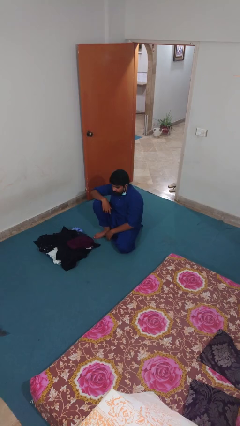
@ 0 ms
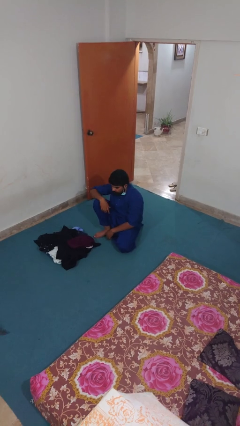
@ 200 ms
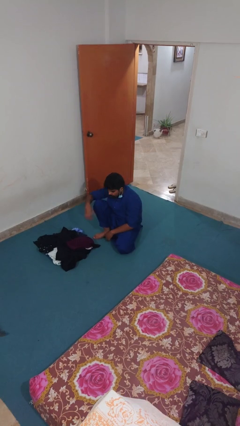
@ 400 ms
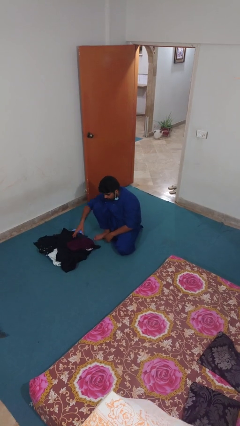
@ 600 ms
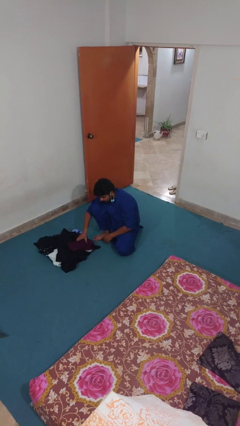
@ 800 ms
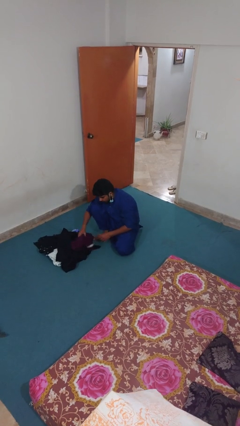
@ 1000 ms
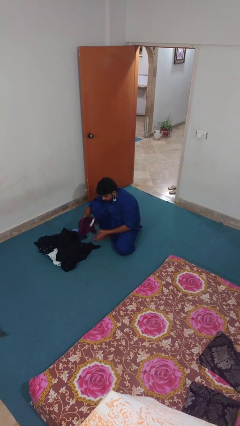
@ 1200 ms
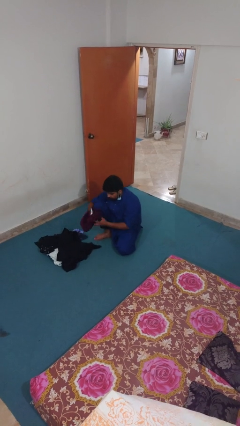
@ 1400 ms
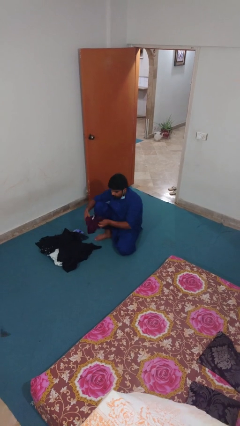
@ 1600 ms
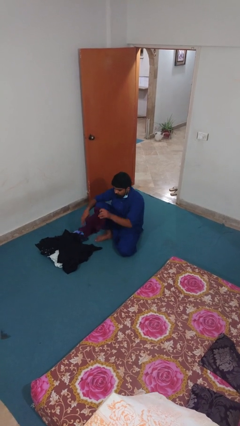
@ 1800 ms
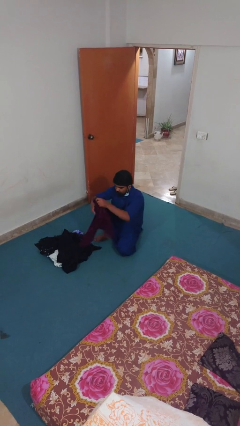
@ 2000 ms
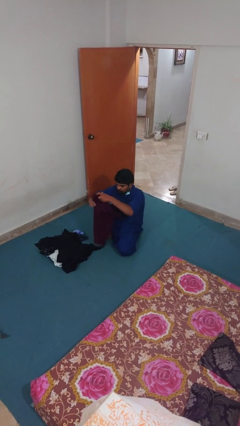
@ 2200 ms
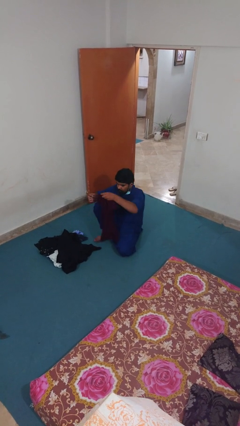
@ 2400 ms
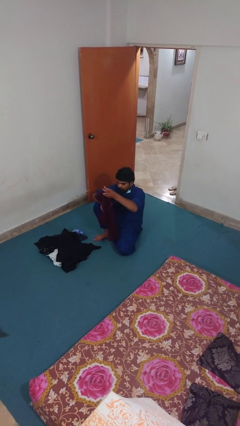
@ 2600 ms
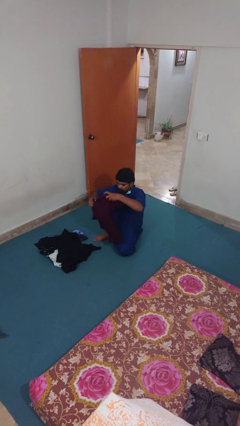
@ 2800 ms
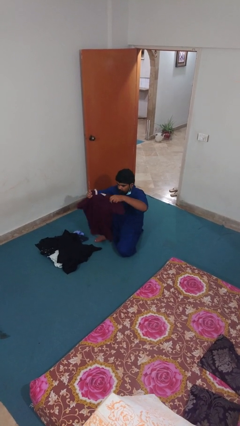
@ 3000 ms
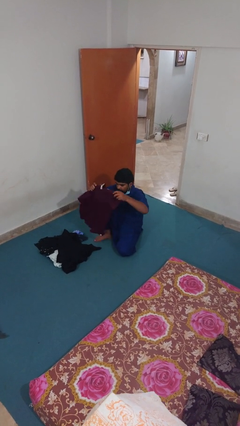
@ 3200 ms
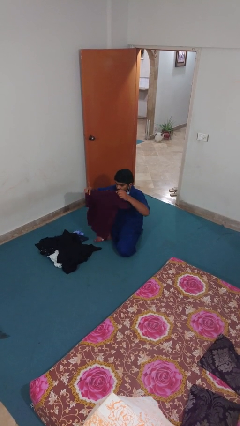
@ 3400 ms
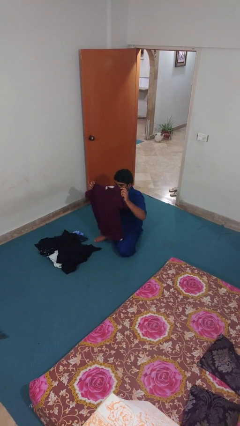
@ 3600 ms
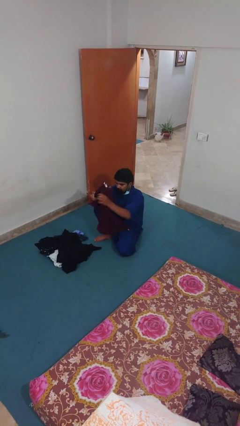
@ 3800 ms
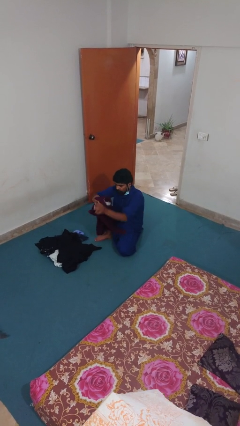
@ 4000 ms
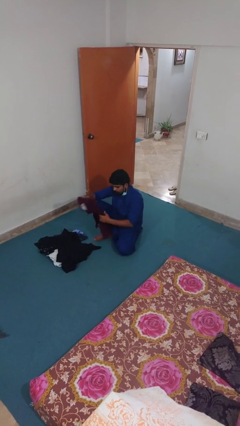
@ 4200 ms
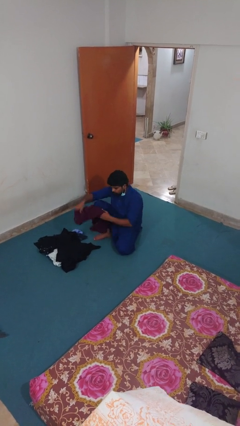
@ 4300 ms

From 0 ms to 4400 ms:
person folds shirt

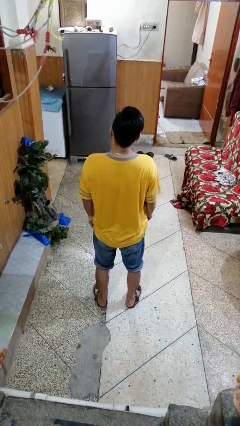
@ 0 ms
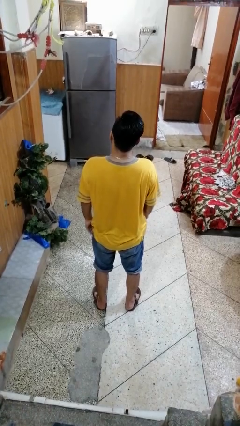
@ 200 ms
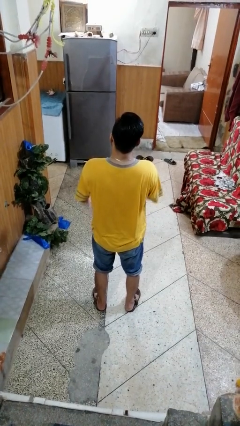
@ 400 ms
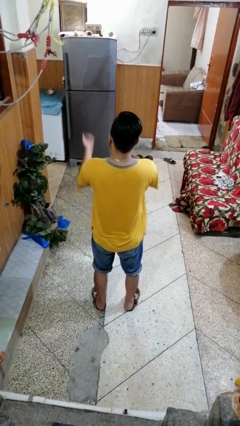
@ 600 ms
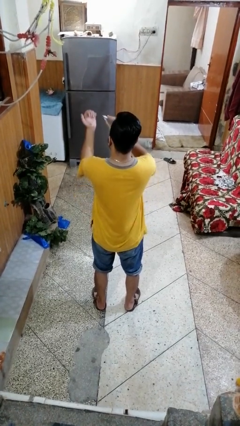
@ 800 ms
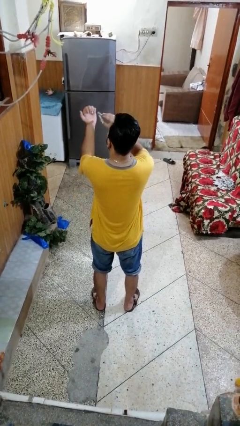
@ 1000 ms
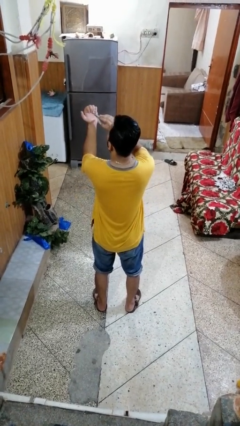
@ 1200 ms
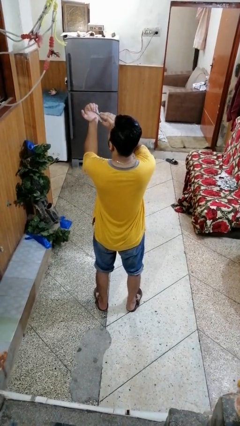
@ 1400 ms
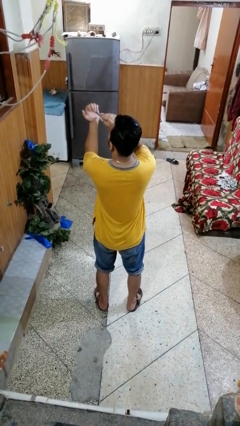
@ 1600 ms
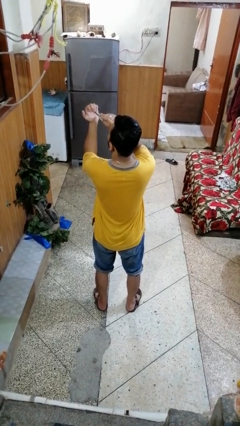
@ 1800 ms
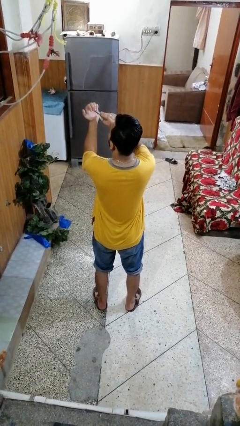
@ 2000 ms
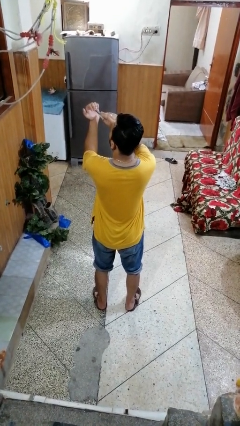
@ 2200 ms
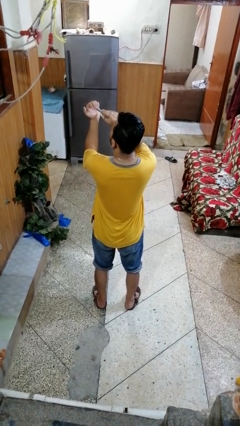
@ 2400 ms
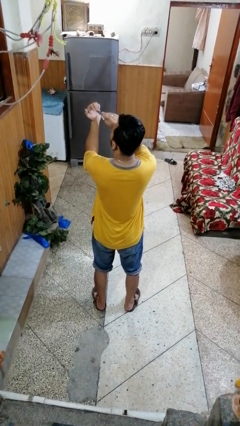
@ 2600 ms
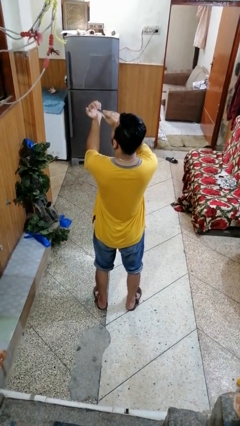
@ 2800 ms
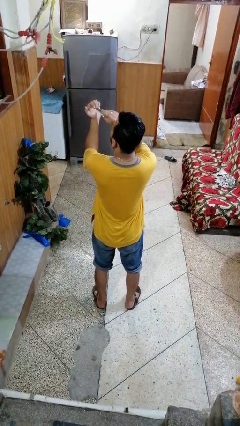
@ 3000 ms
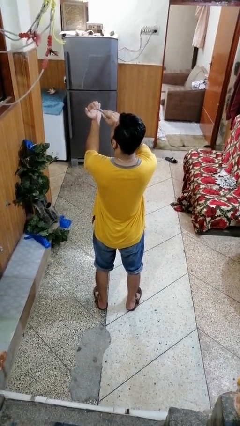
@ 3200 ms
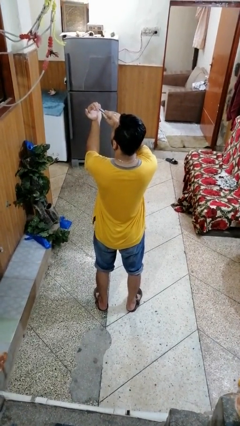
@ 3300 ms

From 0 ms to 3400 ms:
person clips fingernails

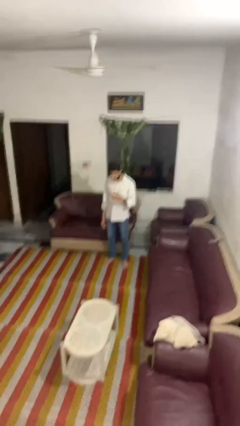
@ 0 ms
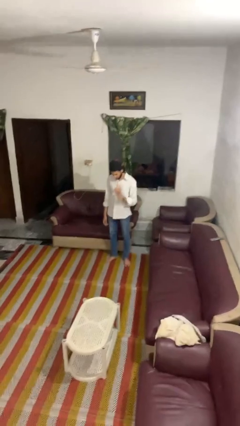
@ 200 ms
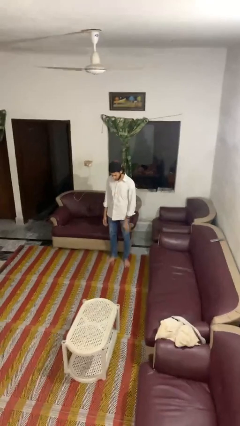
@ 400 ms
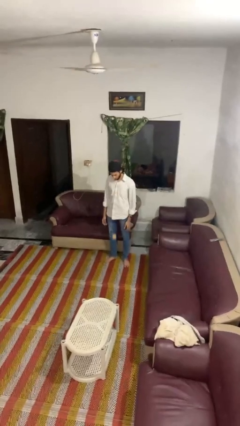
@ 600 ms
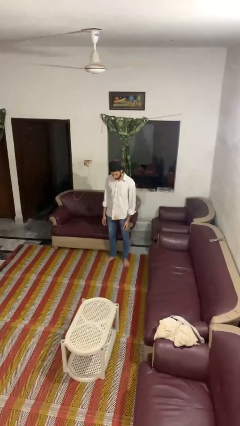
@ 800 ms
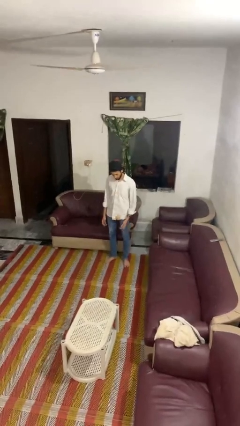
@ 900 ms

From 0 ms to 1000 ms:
person bounces ball on floor

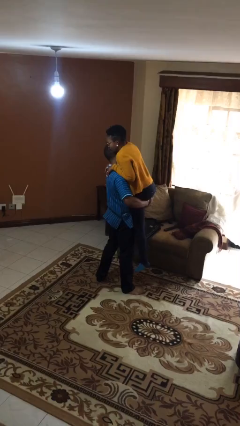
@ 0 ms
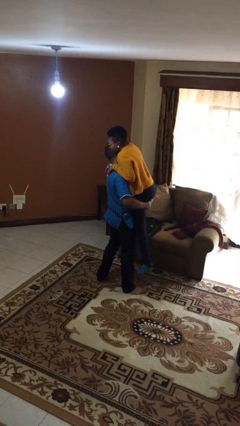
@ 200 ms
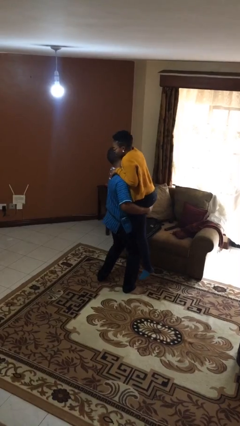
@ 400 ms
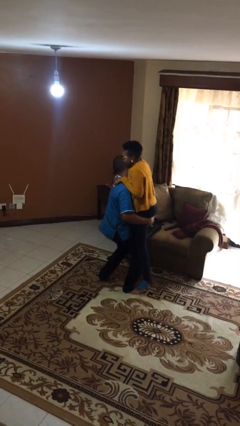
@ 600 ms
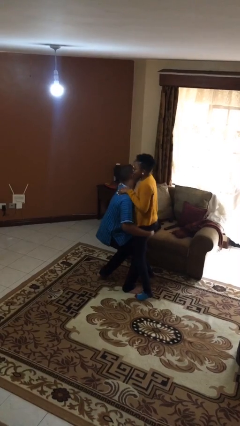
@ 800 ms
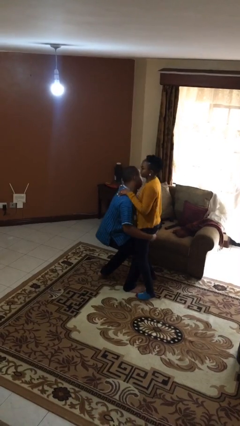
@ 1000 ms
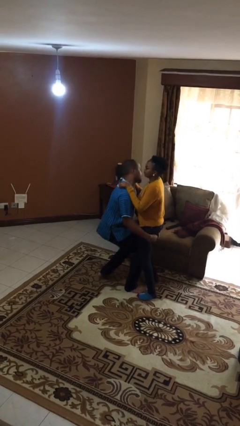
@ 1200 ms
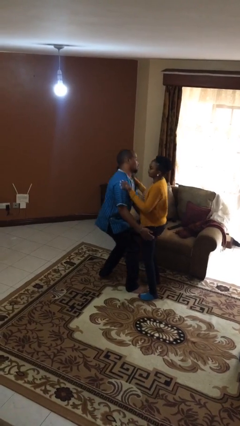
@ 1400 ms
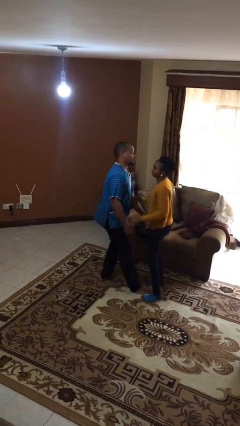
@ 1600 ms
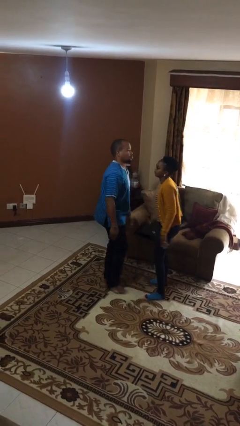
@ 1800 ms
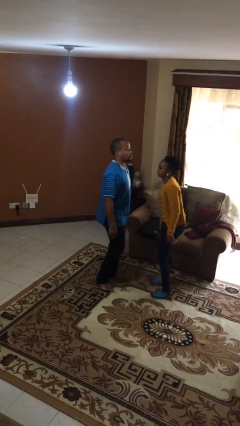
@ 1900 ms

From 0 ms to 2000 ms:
person puts down person

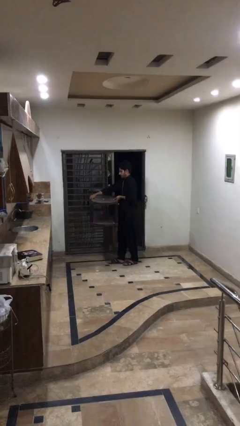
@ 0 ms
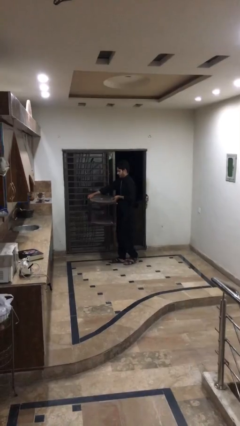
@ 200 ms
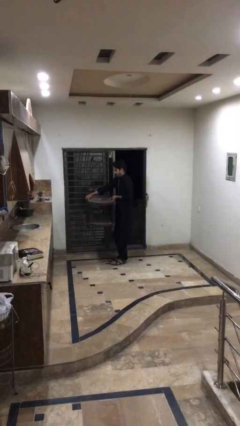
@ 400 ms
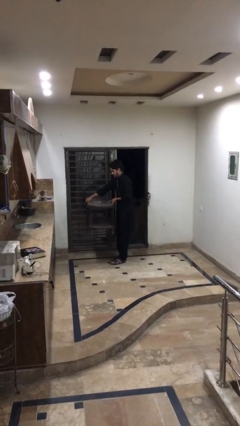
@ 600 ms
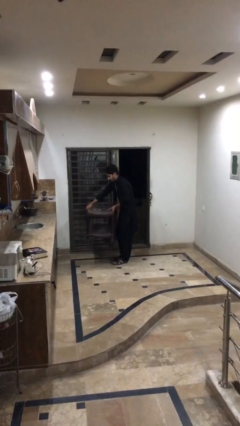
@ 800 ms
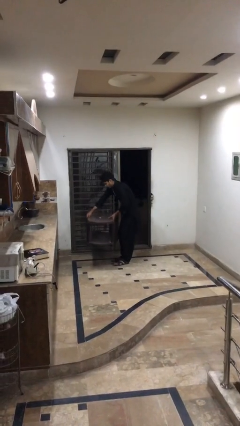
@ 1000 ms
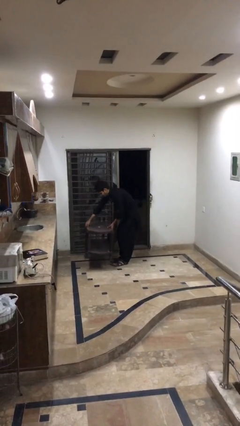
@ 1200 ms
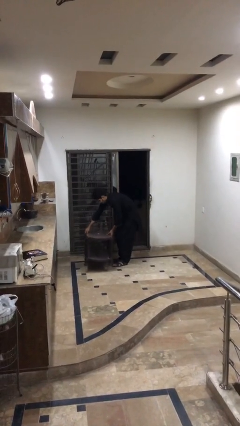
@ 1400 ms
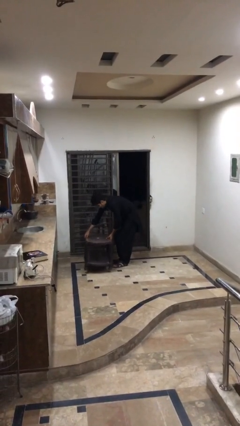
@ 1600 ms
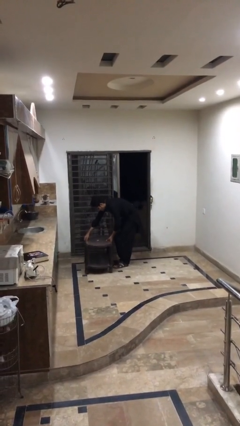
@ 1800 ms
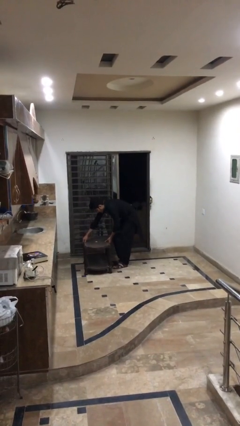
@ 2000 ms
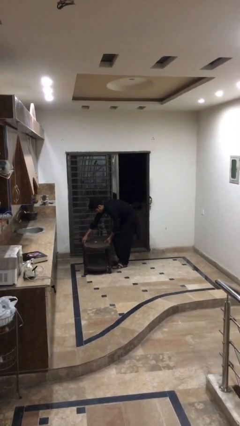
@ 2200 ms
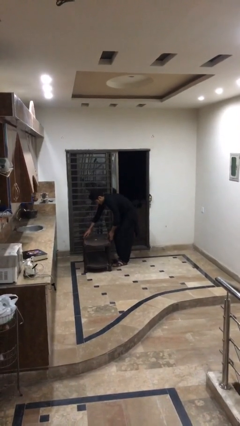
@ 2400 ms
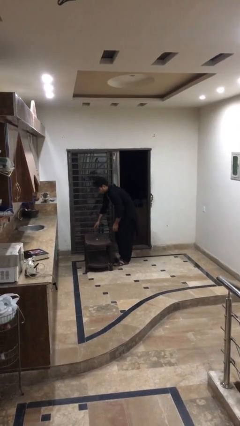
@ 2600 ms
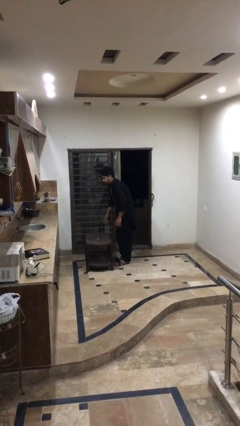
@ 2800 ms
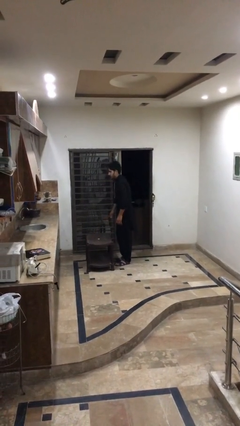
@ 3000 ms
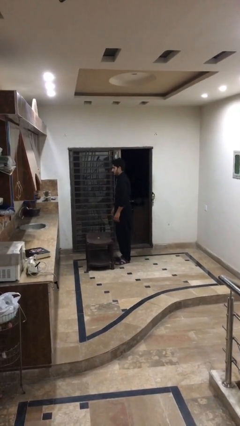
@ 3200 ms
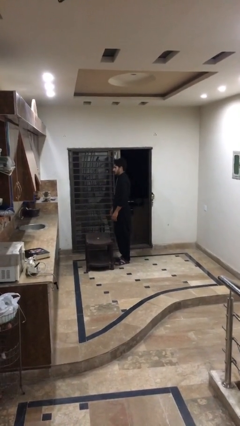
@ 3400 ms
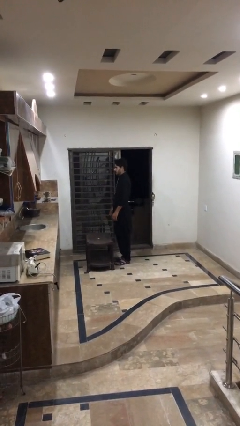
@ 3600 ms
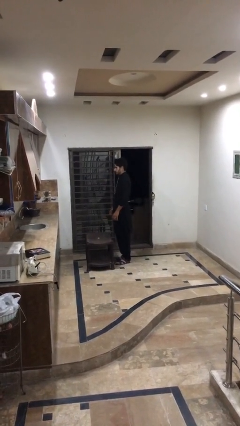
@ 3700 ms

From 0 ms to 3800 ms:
person puts down object on floor

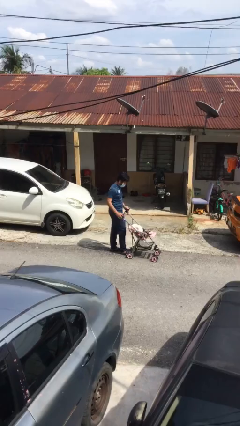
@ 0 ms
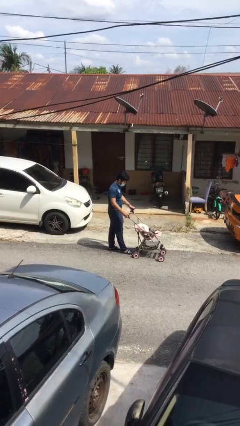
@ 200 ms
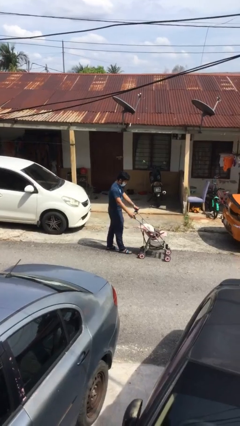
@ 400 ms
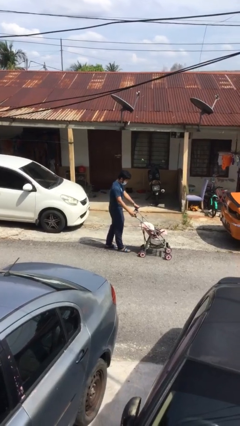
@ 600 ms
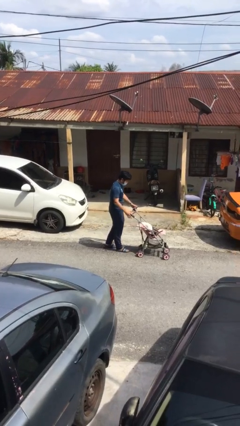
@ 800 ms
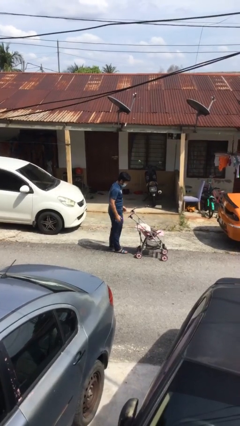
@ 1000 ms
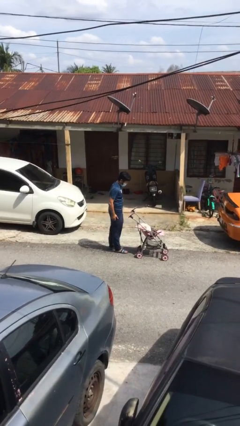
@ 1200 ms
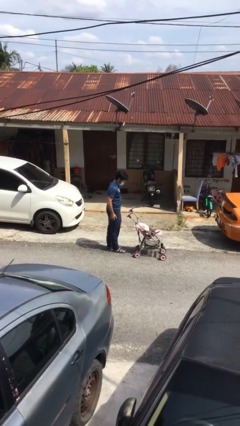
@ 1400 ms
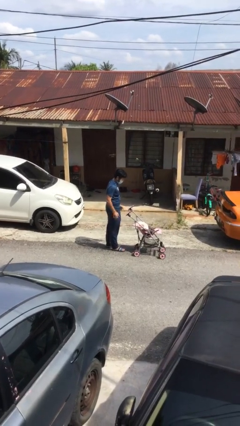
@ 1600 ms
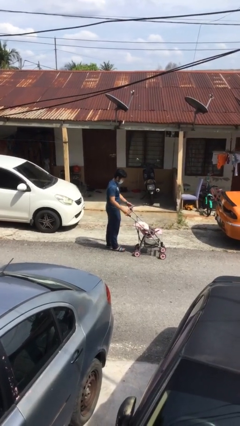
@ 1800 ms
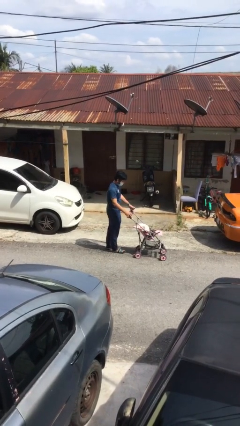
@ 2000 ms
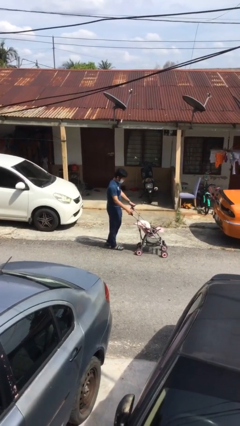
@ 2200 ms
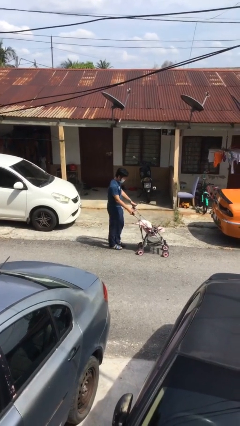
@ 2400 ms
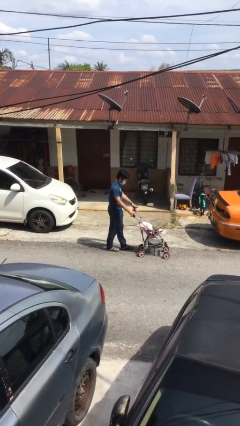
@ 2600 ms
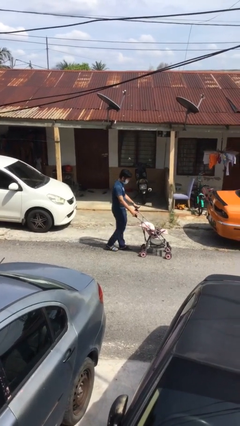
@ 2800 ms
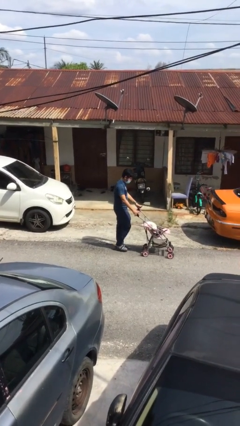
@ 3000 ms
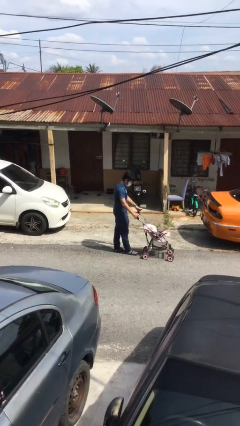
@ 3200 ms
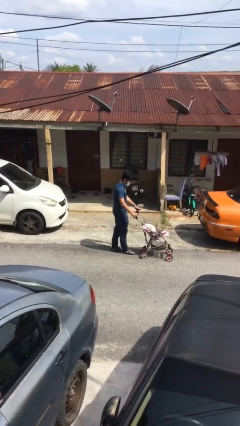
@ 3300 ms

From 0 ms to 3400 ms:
person pushes wheeled cart
